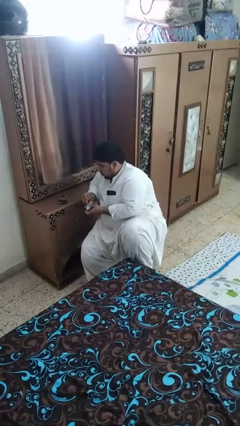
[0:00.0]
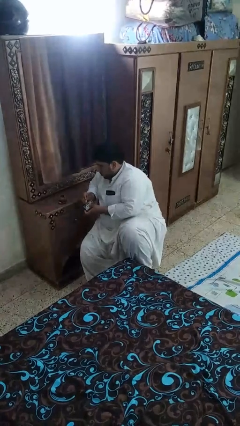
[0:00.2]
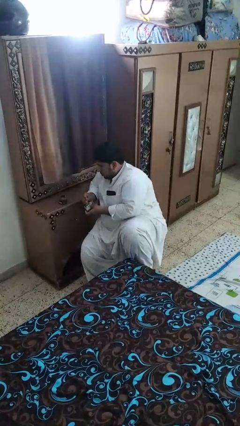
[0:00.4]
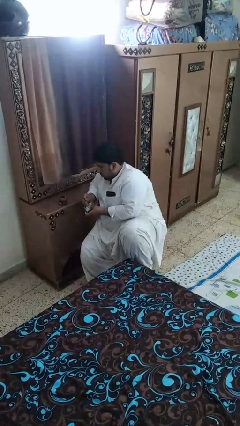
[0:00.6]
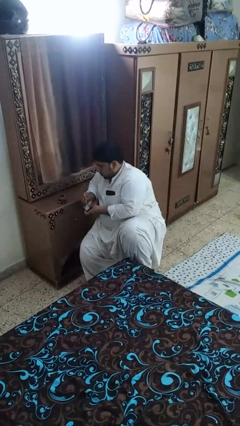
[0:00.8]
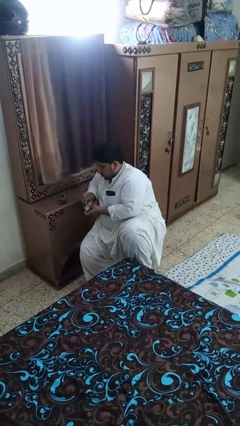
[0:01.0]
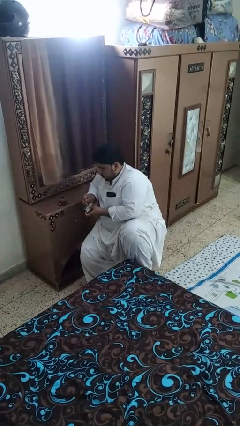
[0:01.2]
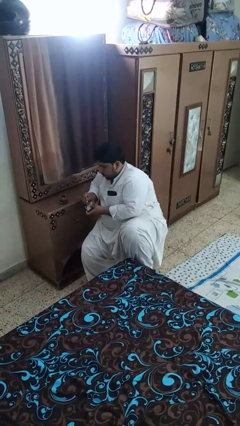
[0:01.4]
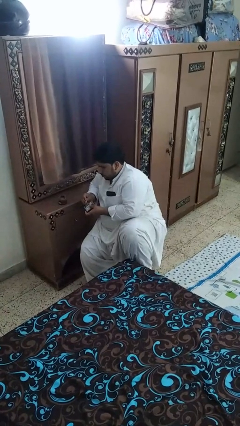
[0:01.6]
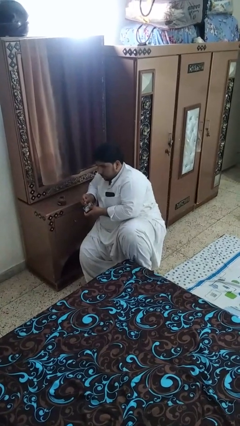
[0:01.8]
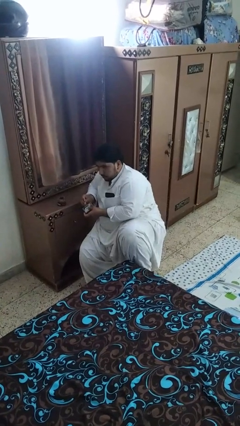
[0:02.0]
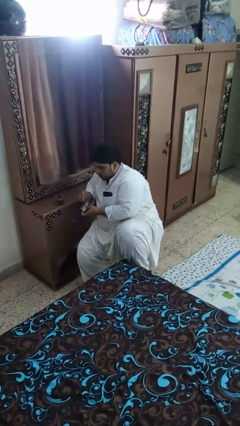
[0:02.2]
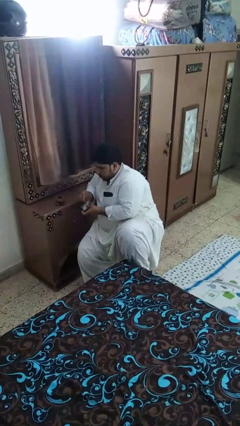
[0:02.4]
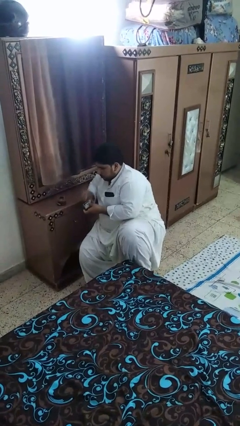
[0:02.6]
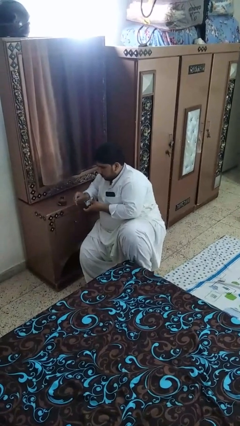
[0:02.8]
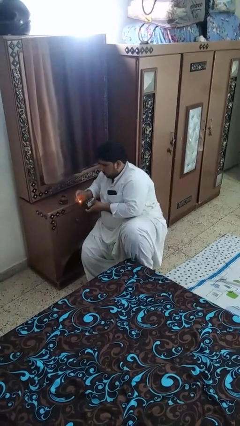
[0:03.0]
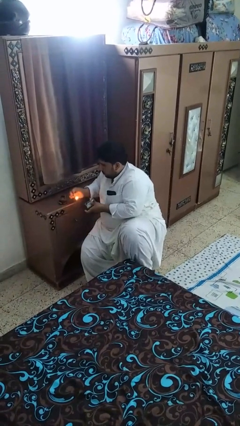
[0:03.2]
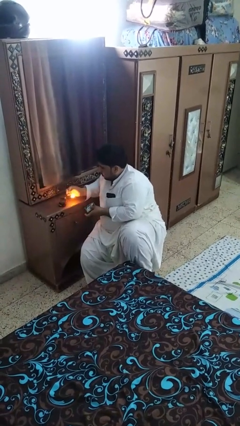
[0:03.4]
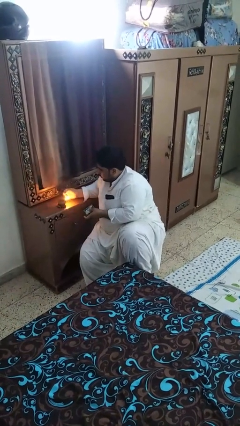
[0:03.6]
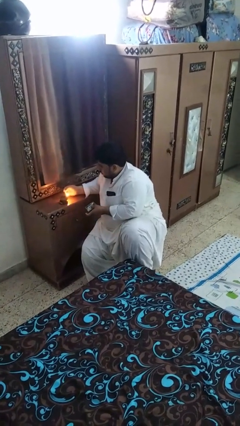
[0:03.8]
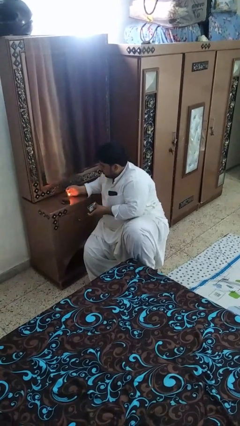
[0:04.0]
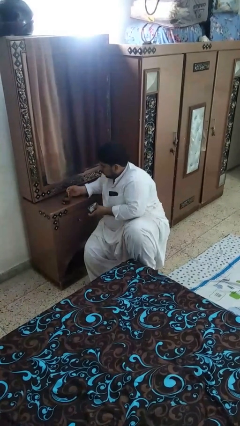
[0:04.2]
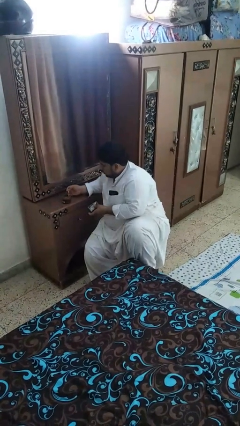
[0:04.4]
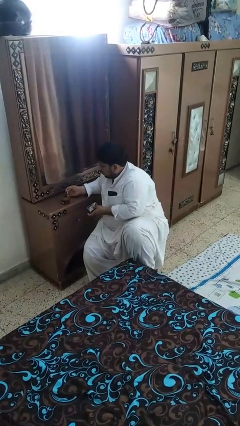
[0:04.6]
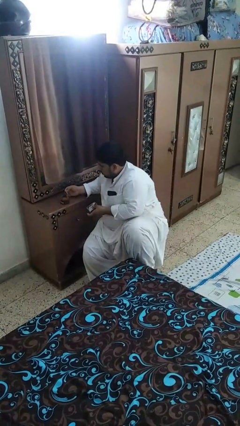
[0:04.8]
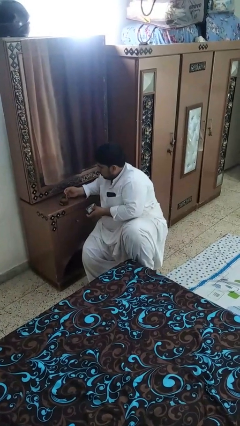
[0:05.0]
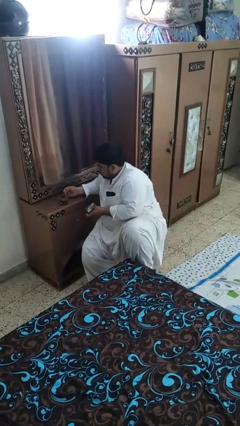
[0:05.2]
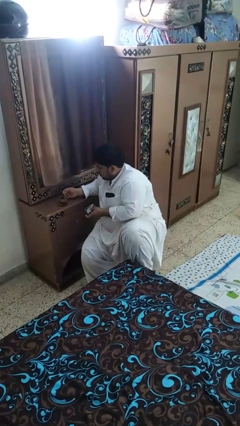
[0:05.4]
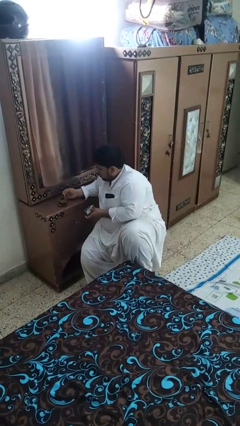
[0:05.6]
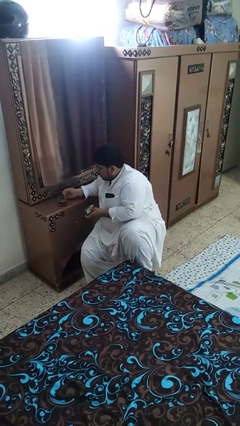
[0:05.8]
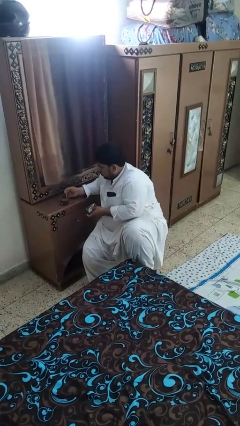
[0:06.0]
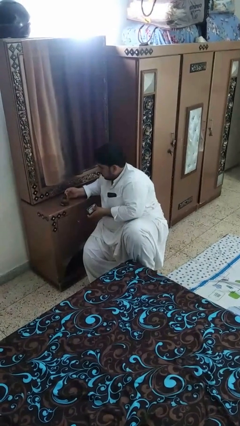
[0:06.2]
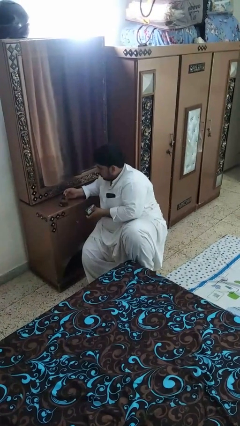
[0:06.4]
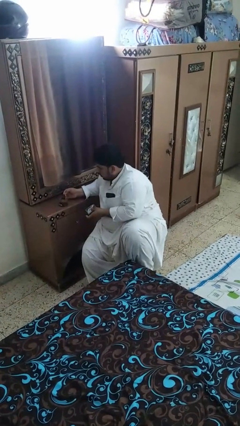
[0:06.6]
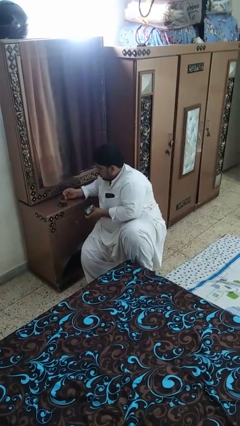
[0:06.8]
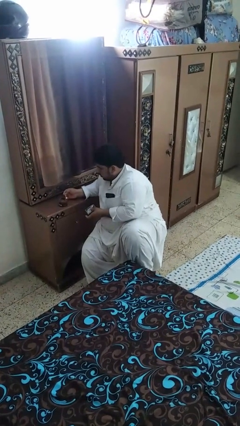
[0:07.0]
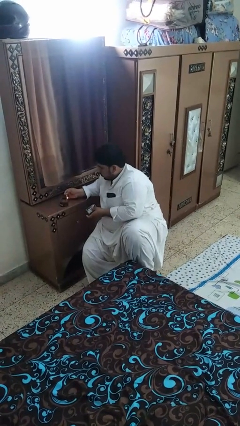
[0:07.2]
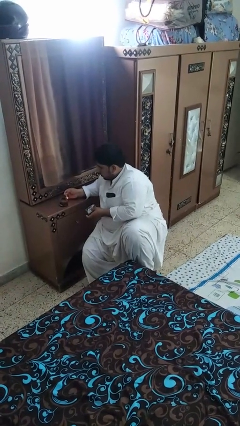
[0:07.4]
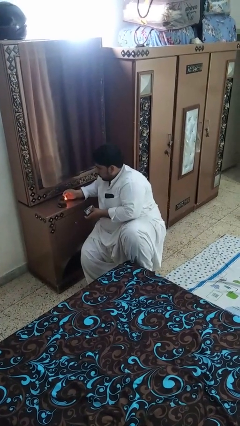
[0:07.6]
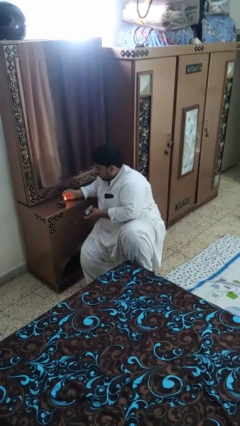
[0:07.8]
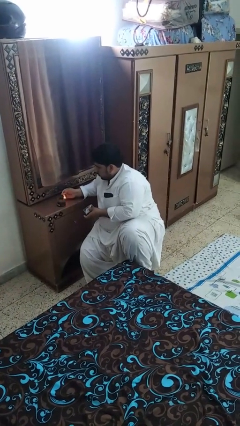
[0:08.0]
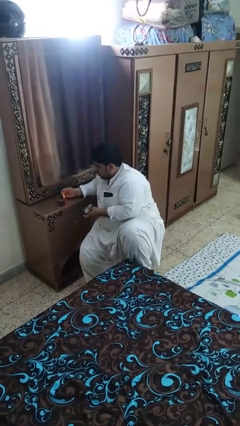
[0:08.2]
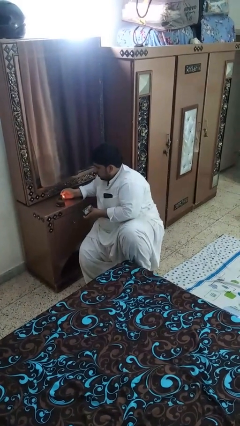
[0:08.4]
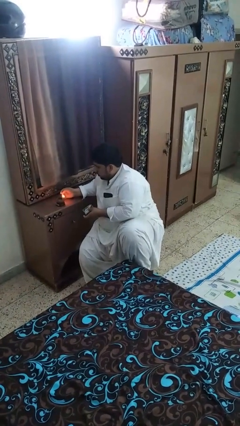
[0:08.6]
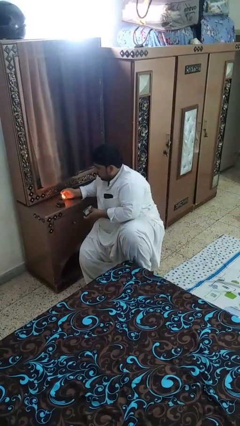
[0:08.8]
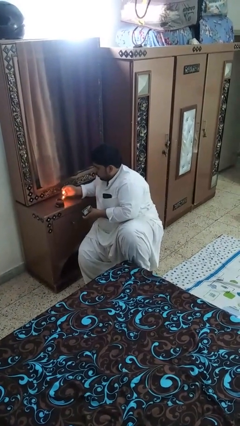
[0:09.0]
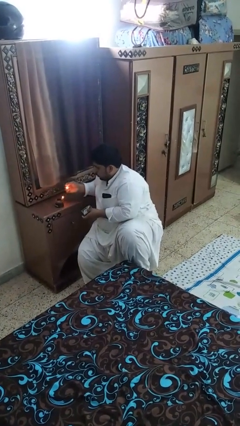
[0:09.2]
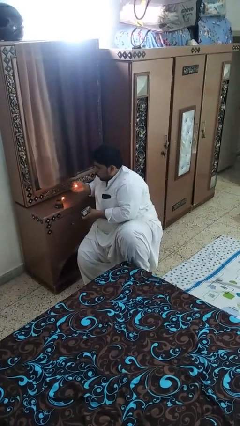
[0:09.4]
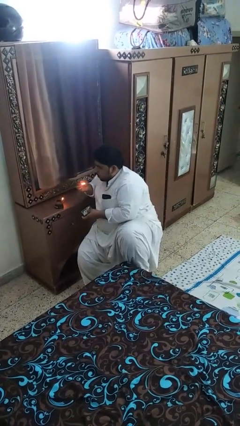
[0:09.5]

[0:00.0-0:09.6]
person lights candle

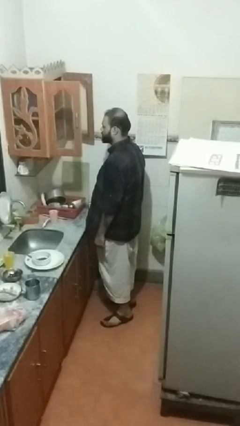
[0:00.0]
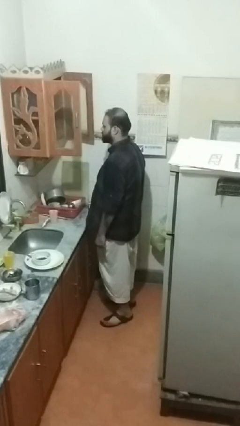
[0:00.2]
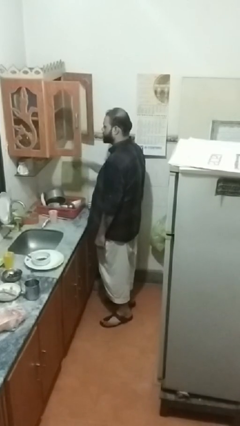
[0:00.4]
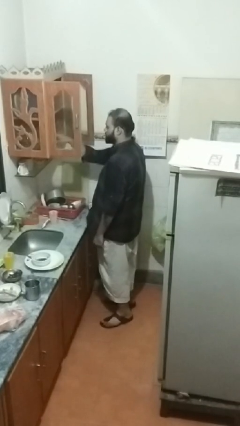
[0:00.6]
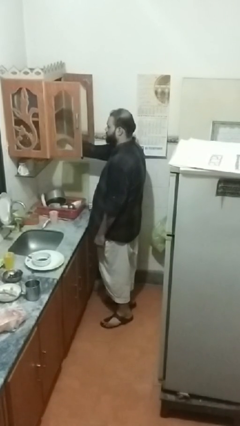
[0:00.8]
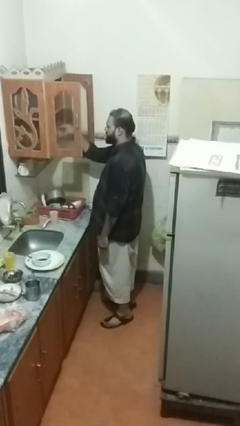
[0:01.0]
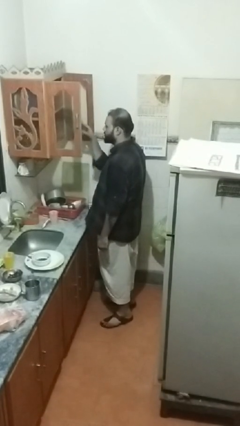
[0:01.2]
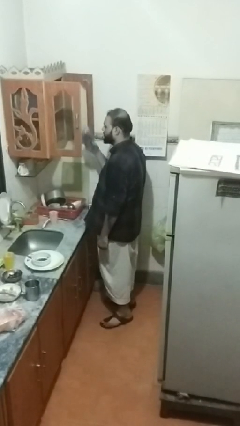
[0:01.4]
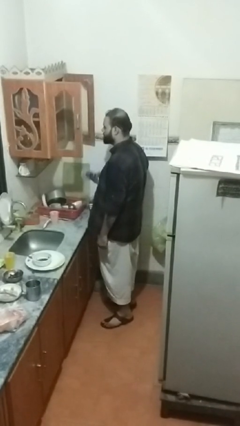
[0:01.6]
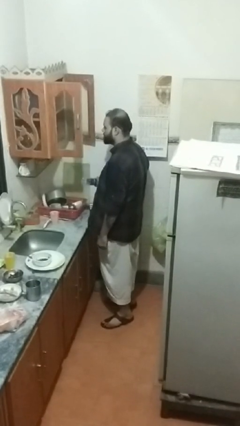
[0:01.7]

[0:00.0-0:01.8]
person takes object from cabinet

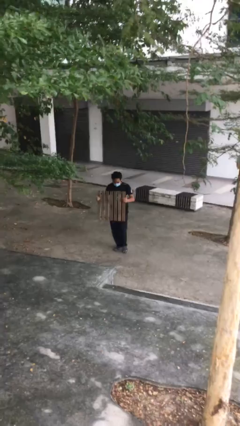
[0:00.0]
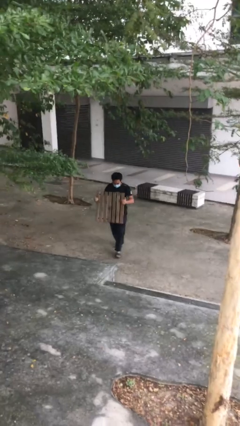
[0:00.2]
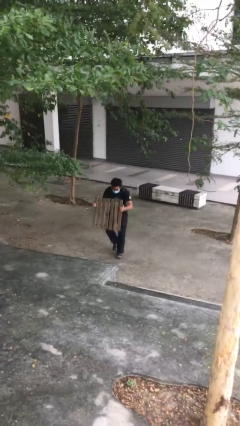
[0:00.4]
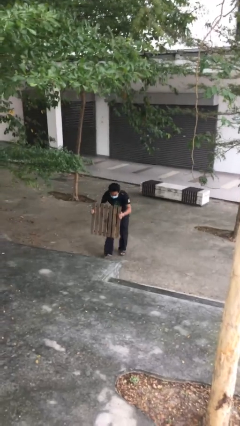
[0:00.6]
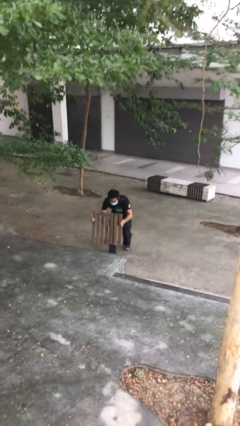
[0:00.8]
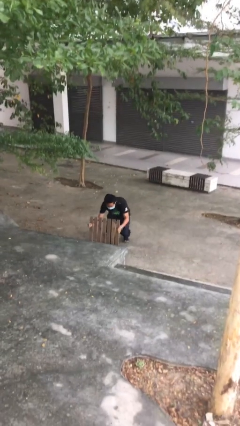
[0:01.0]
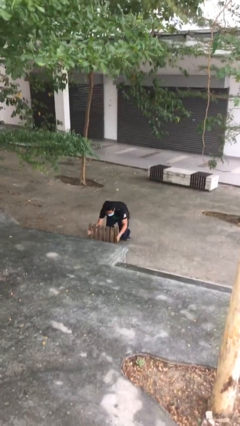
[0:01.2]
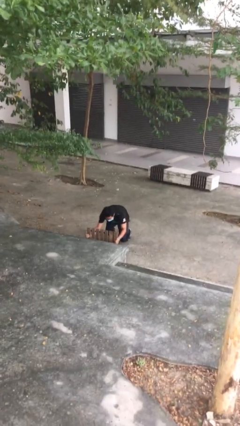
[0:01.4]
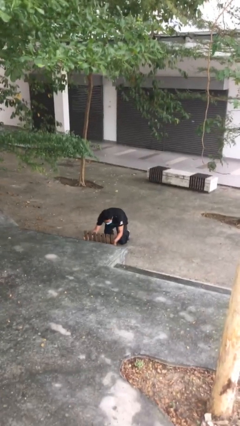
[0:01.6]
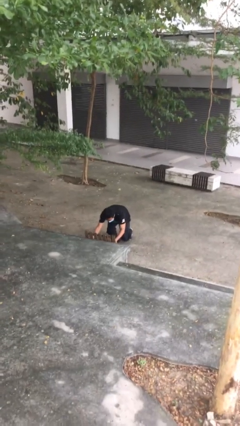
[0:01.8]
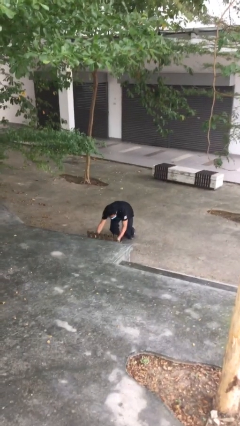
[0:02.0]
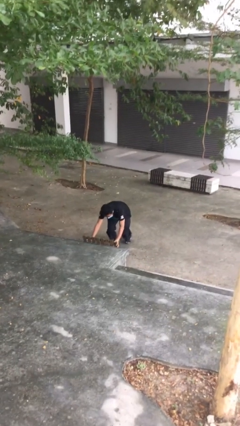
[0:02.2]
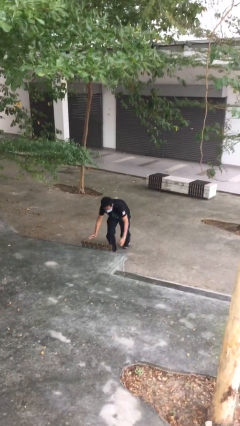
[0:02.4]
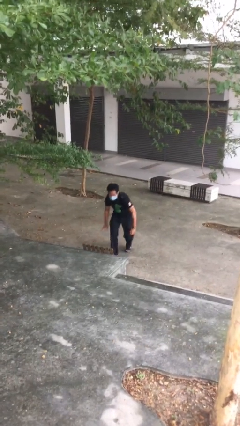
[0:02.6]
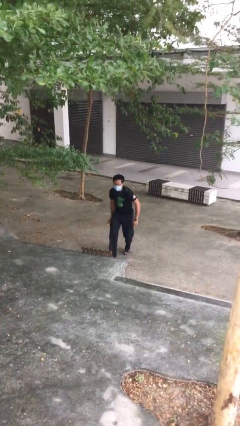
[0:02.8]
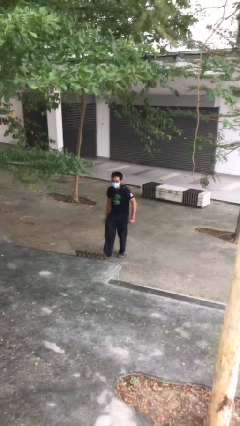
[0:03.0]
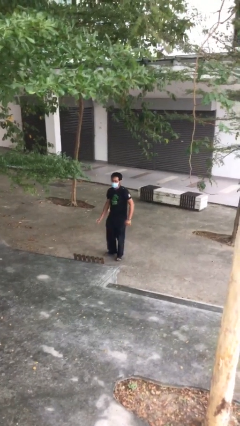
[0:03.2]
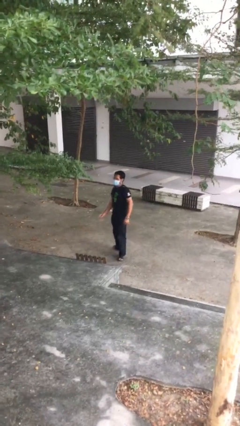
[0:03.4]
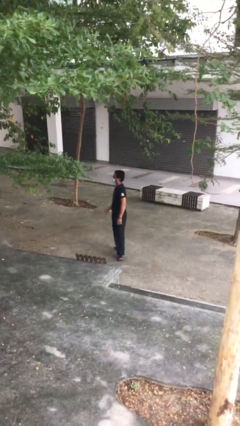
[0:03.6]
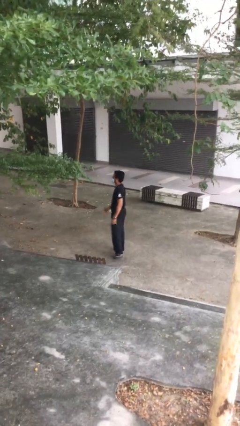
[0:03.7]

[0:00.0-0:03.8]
person puts down object on floor

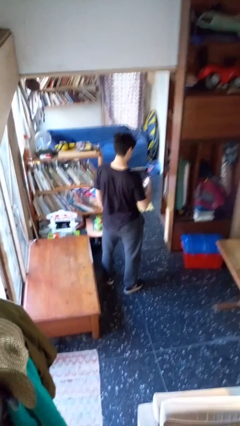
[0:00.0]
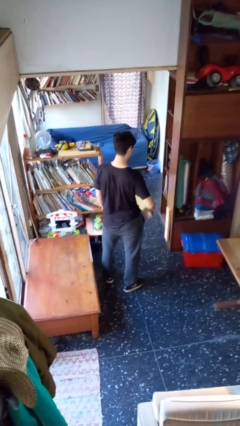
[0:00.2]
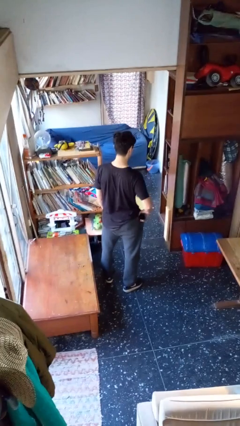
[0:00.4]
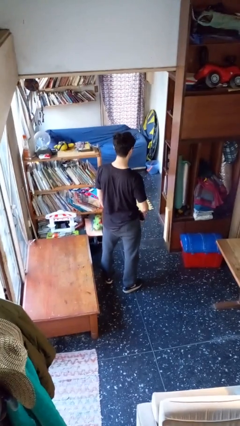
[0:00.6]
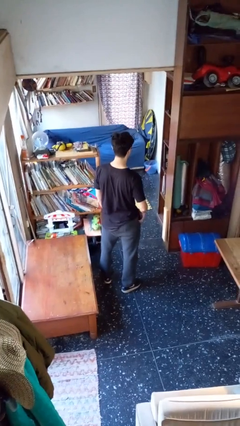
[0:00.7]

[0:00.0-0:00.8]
person puts phone into pocket

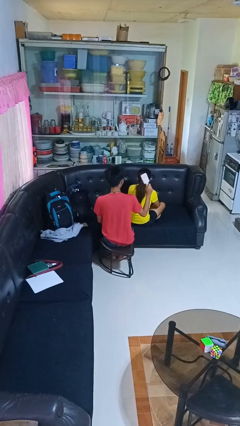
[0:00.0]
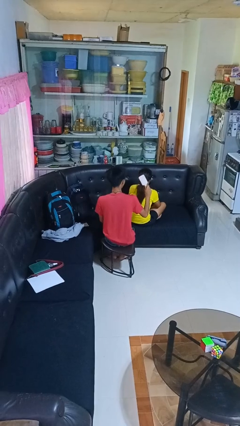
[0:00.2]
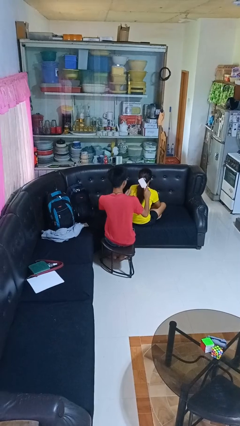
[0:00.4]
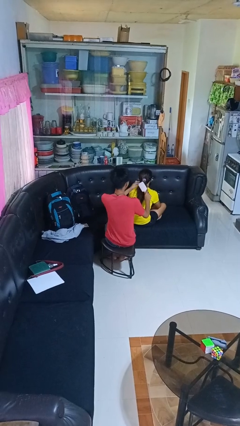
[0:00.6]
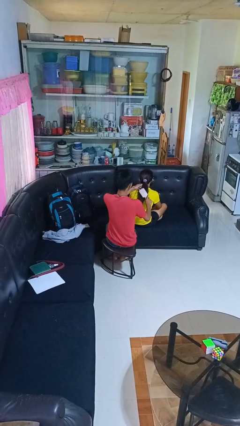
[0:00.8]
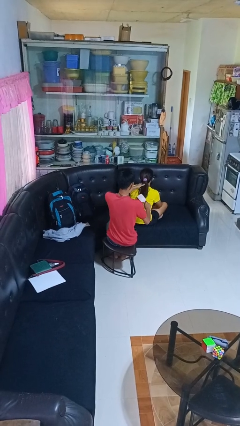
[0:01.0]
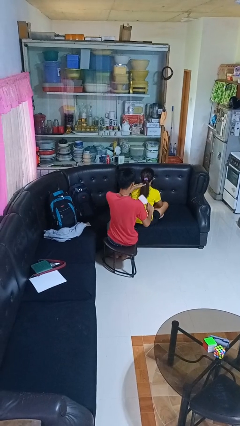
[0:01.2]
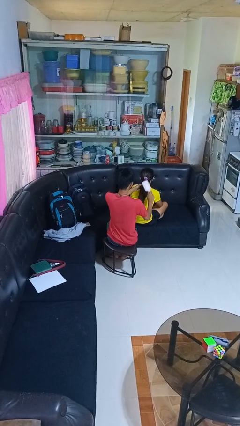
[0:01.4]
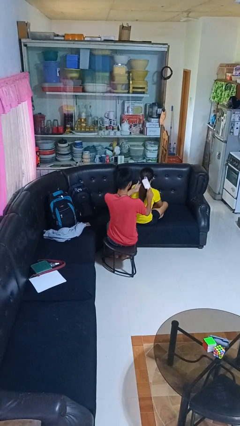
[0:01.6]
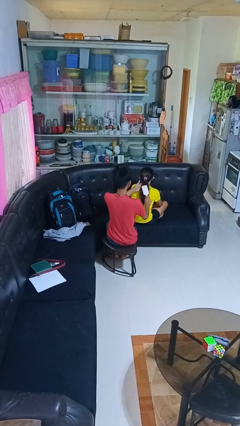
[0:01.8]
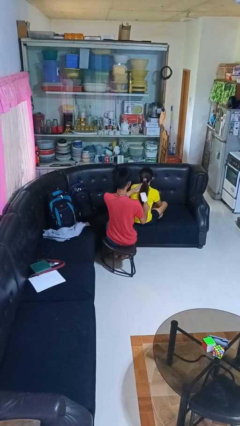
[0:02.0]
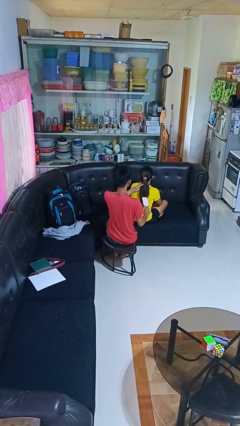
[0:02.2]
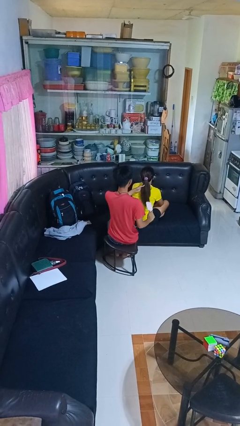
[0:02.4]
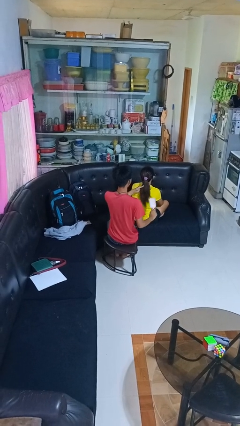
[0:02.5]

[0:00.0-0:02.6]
person brushes hair of person
